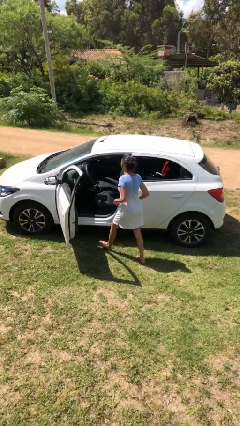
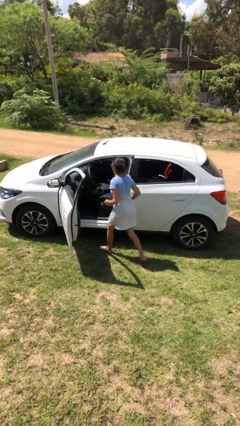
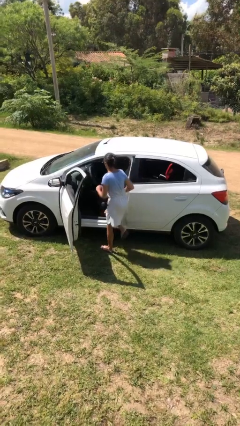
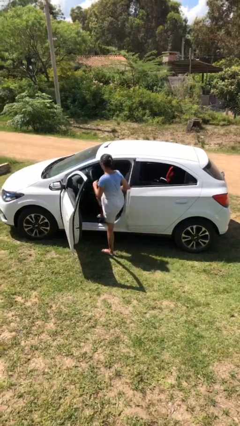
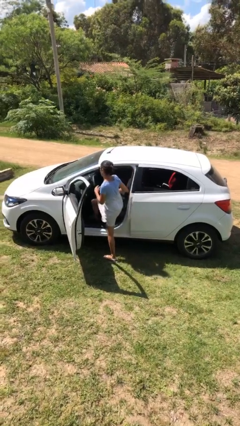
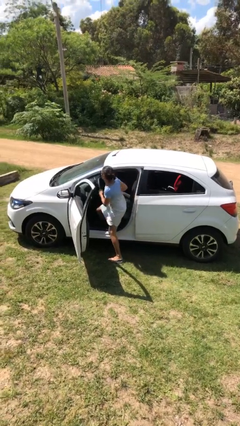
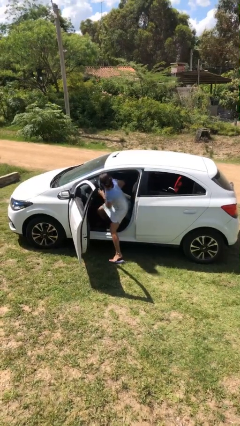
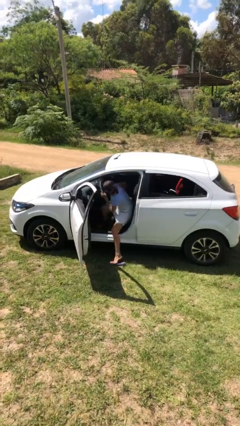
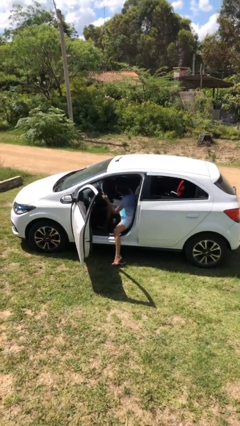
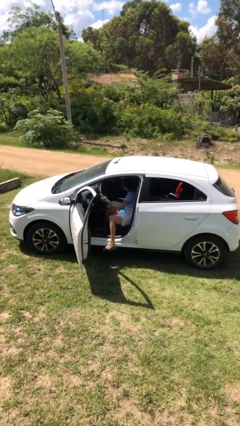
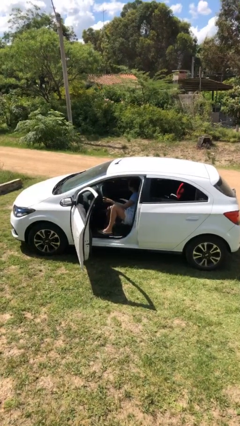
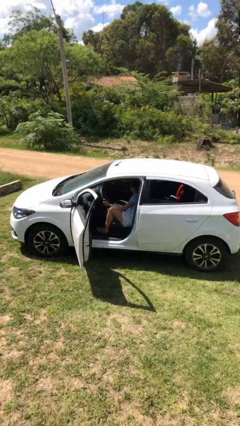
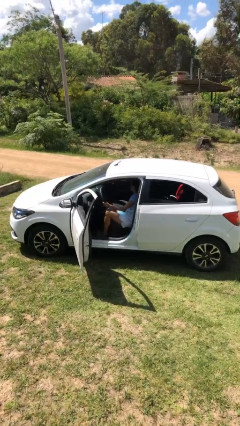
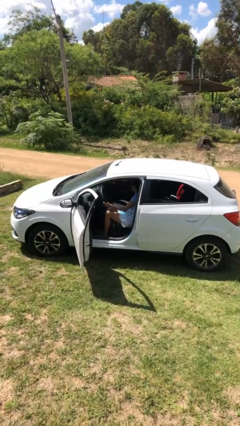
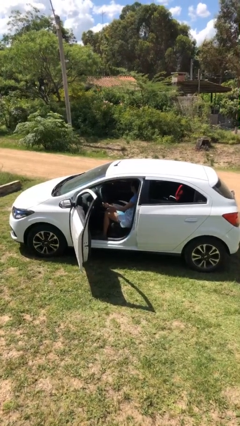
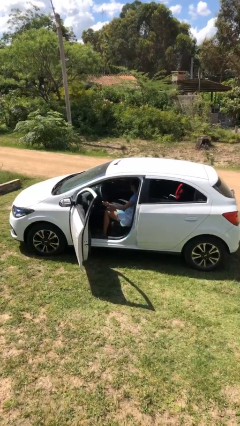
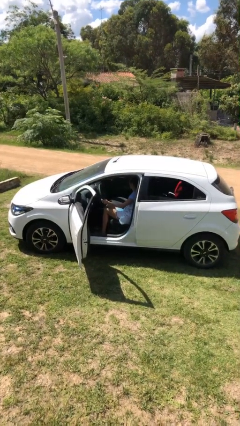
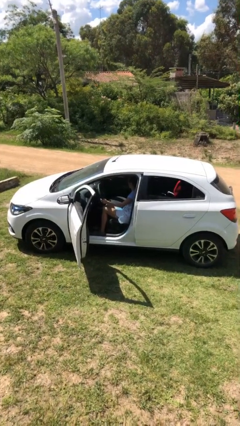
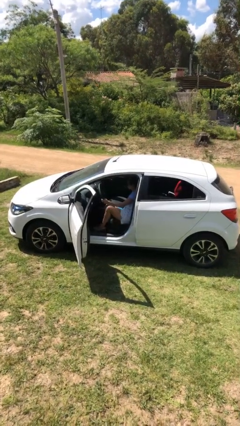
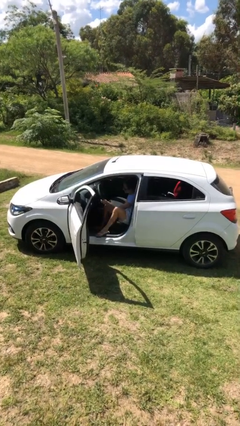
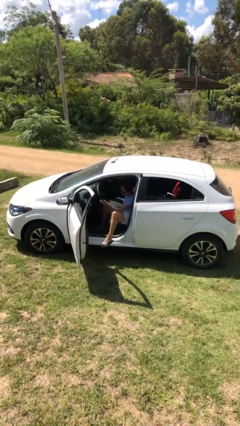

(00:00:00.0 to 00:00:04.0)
person enters car

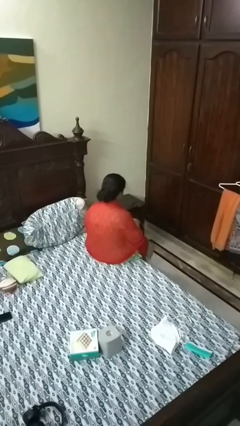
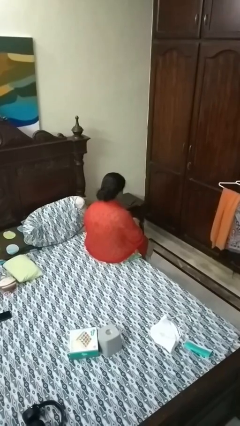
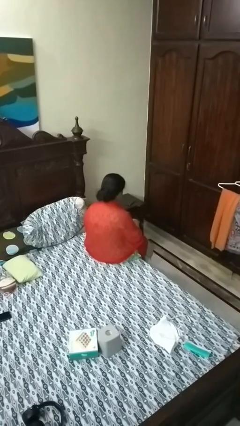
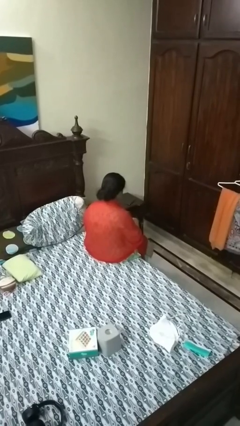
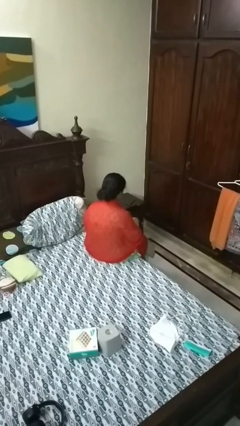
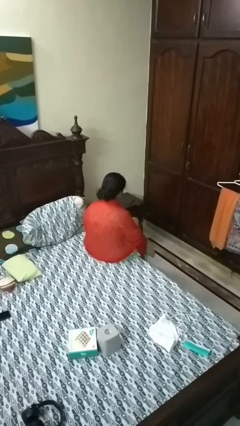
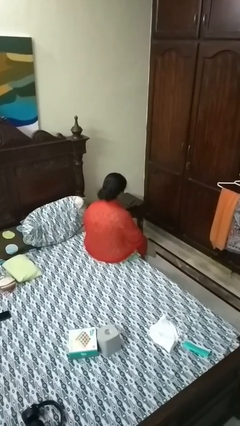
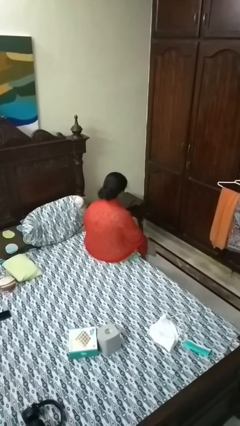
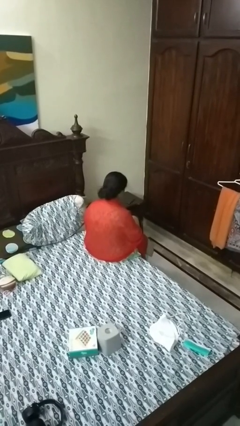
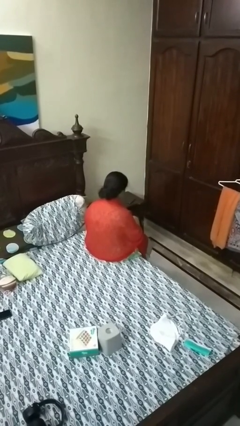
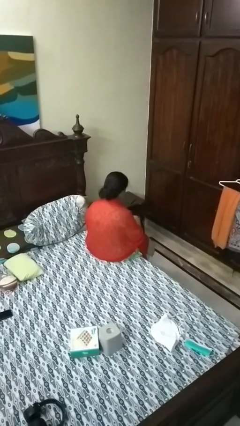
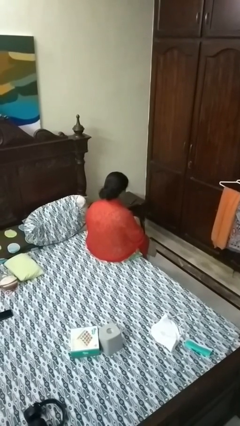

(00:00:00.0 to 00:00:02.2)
person searches in purse

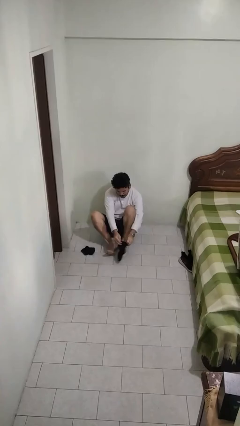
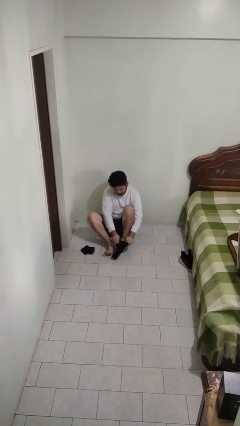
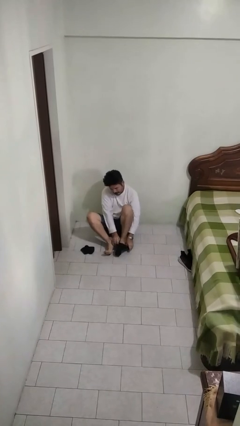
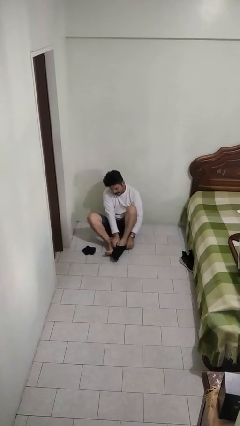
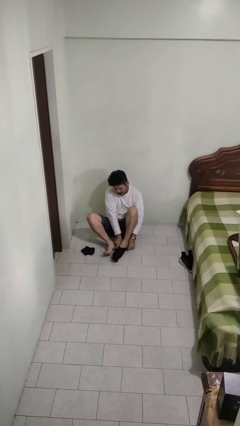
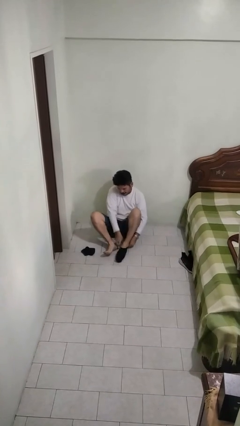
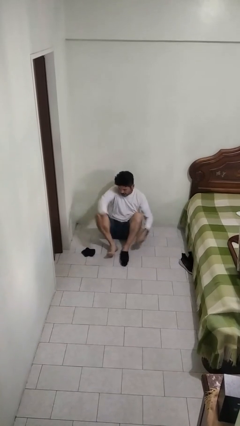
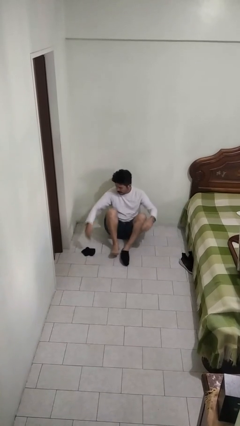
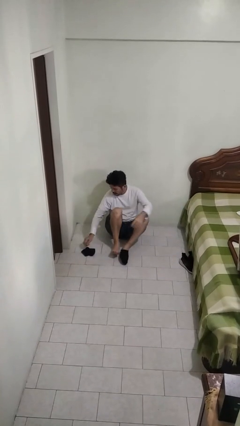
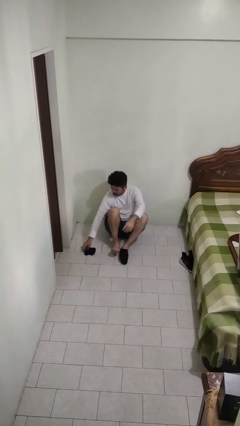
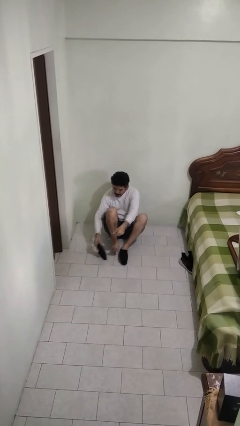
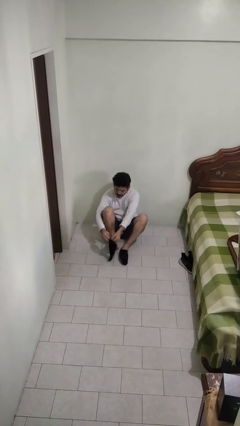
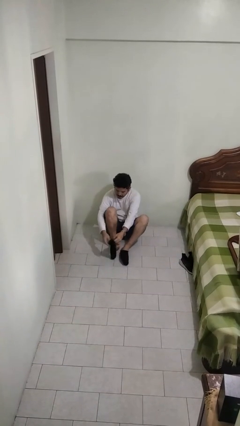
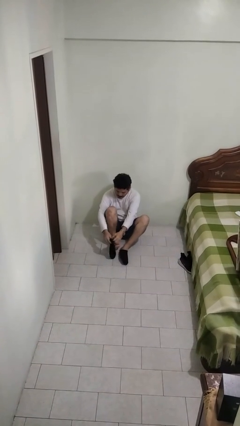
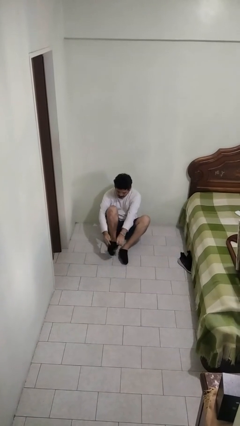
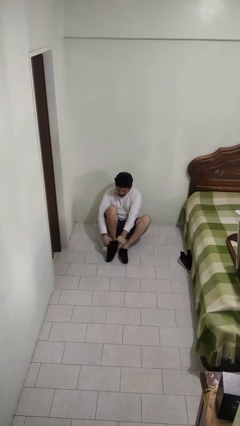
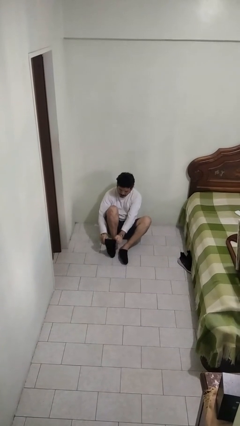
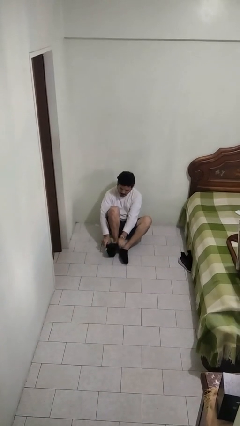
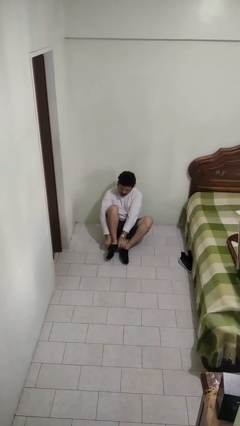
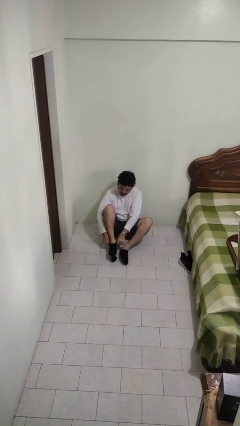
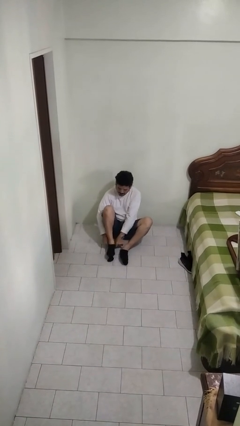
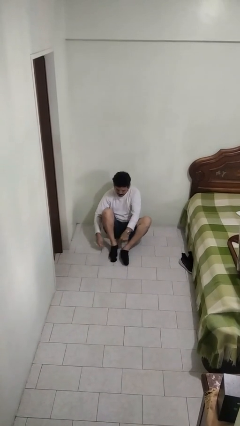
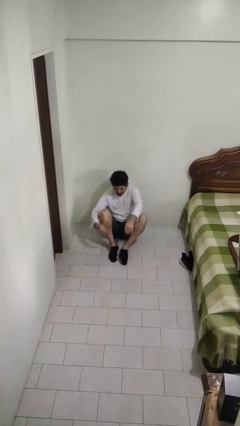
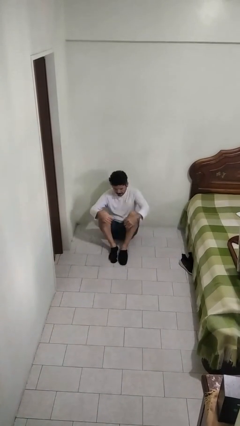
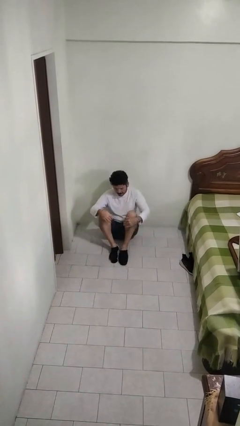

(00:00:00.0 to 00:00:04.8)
person puts on socks

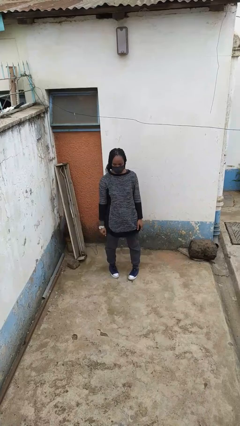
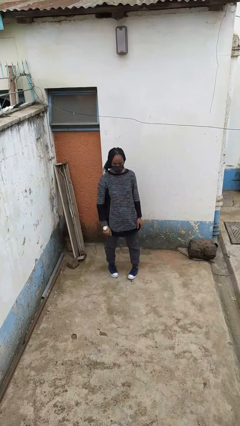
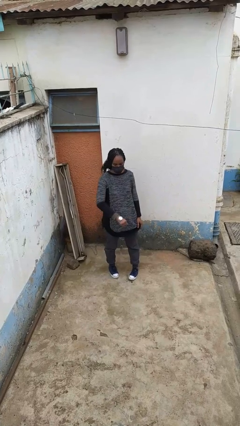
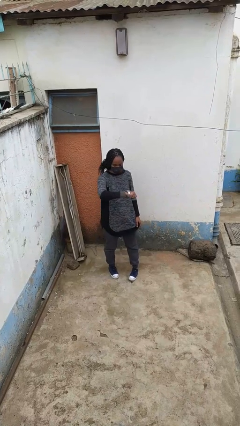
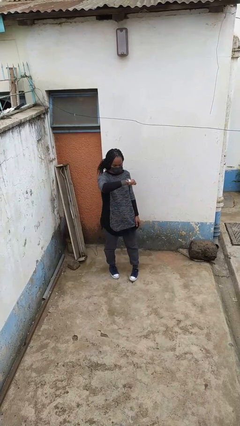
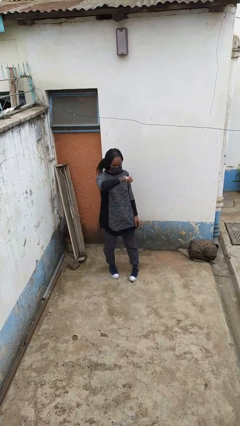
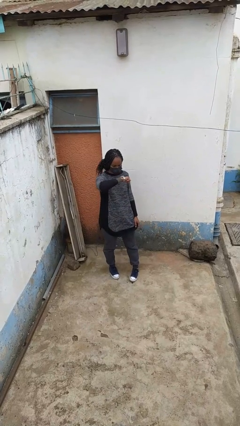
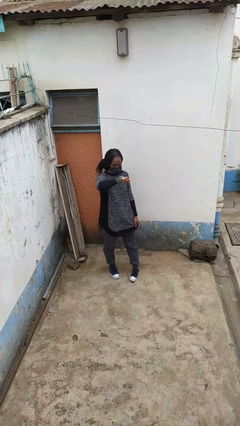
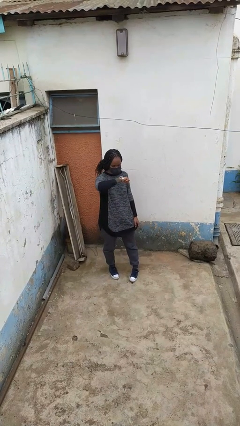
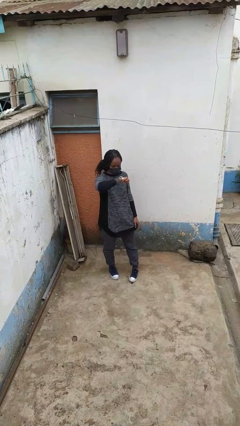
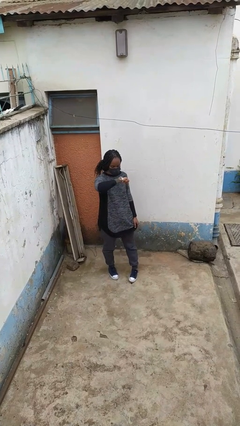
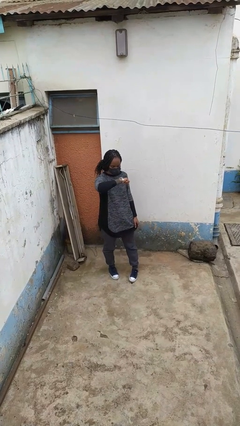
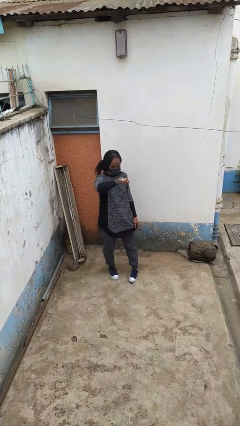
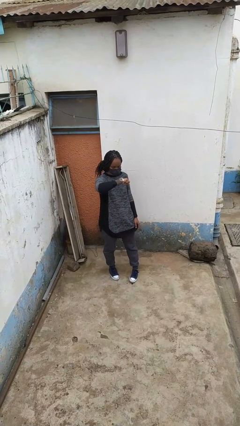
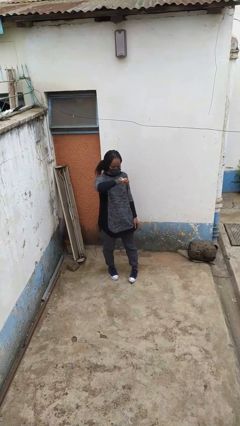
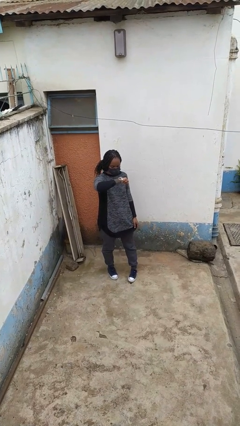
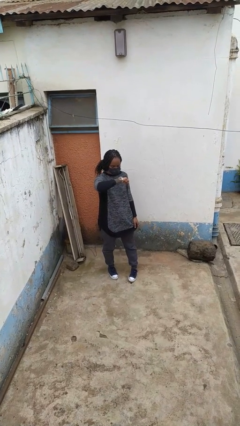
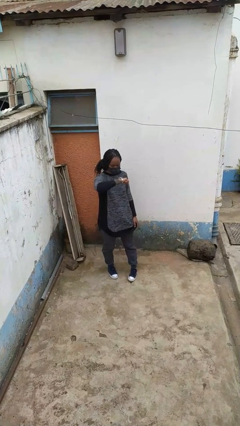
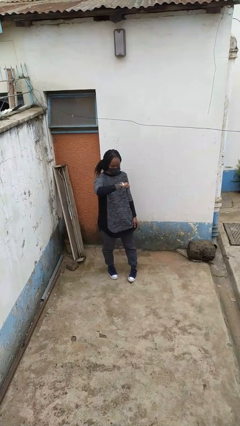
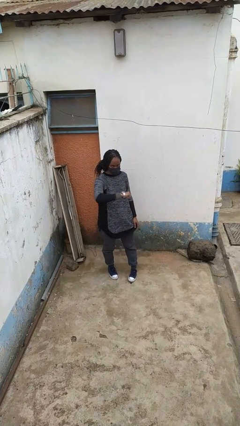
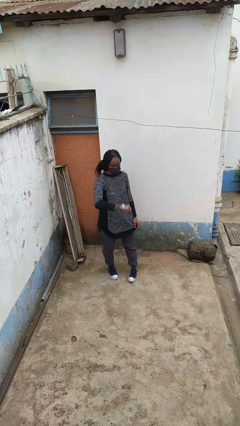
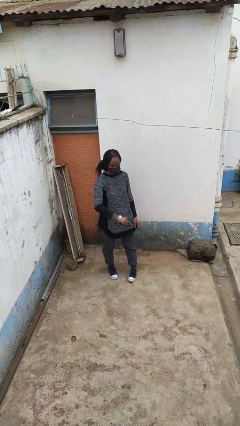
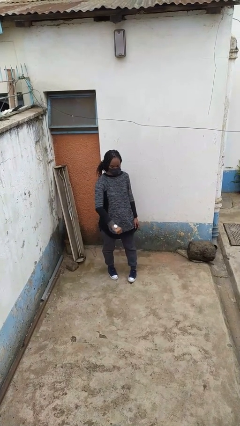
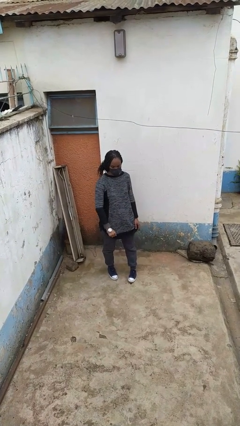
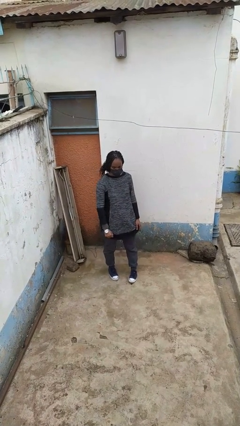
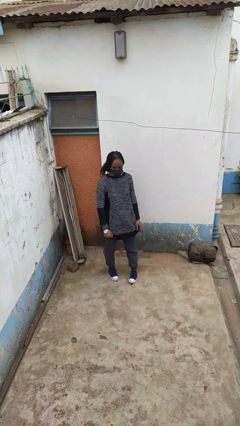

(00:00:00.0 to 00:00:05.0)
person looks at wristwatch

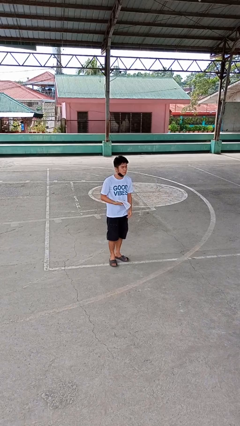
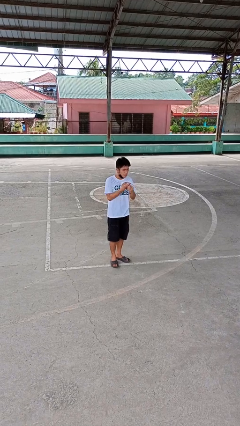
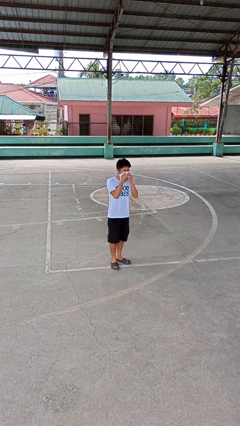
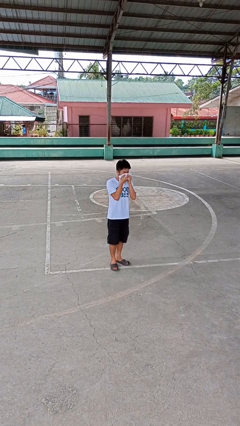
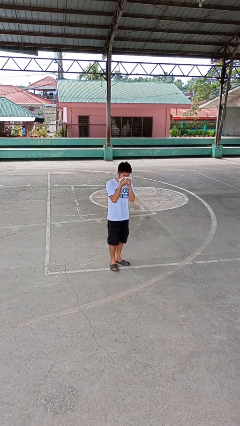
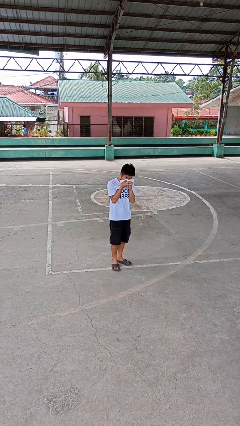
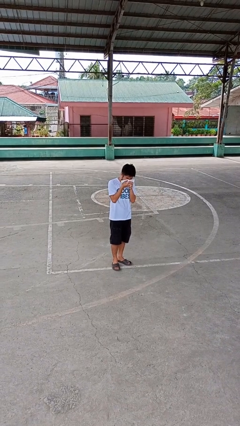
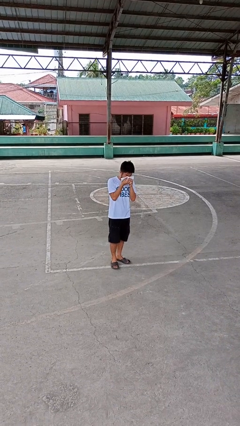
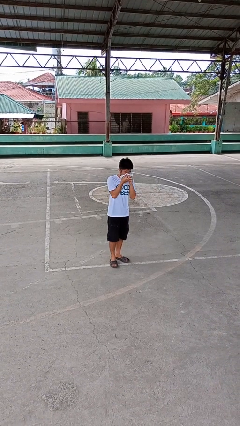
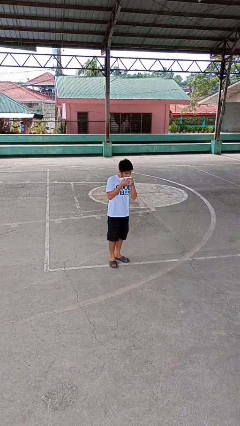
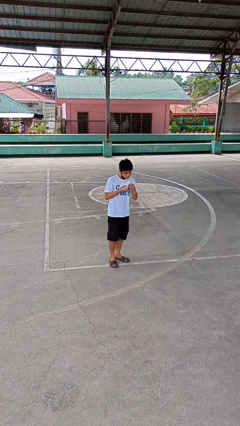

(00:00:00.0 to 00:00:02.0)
person blows nose
